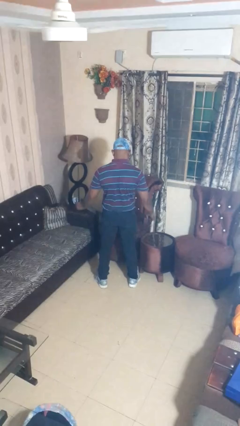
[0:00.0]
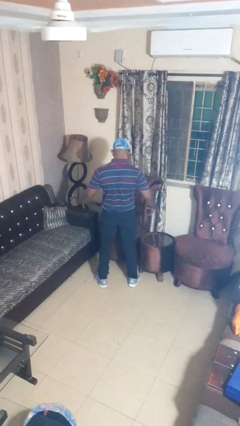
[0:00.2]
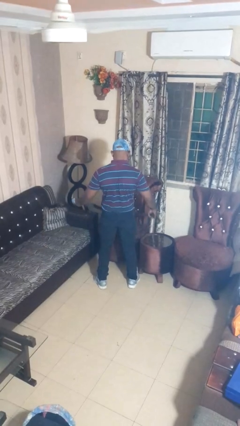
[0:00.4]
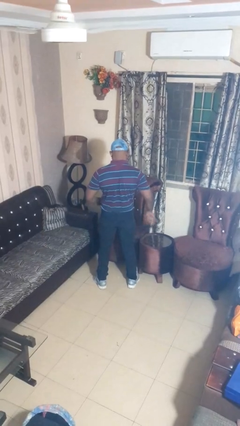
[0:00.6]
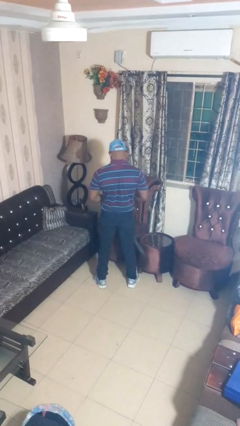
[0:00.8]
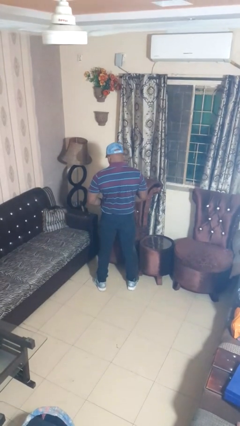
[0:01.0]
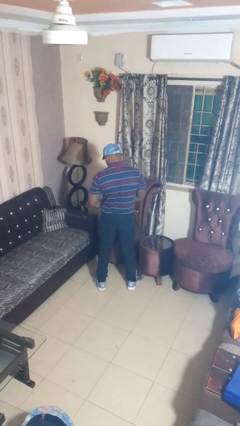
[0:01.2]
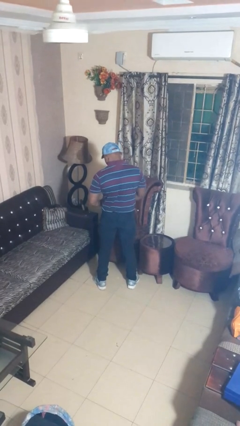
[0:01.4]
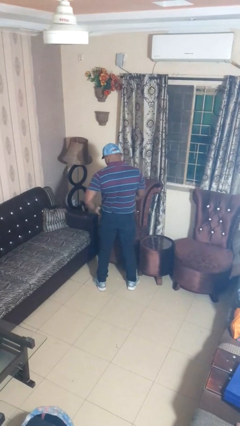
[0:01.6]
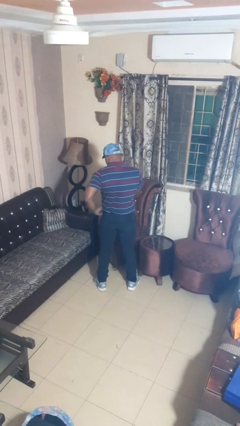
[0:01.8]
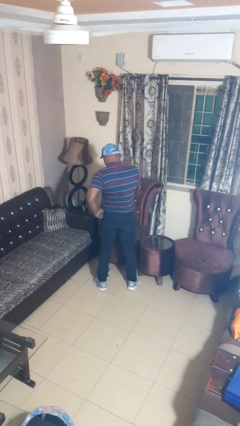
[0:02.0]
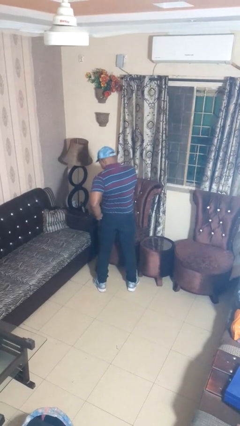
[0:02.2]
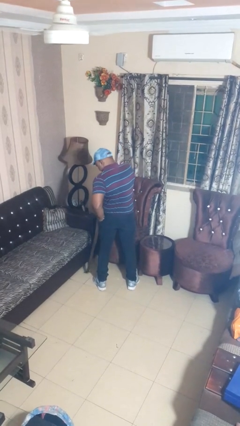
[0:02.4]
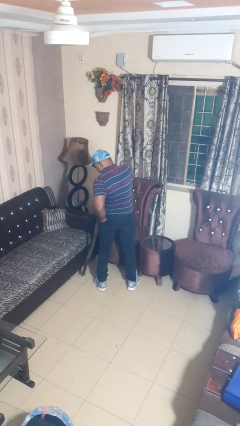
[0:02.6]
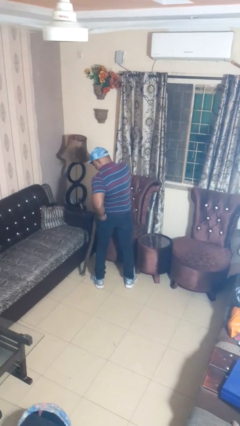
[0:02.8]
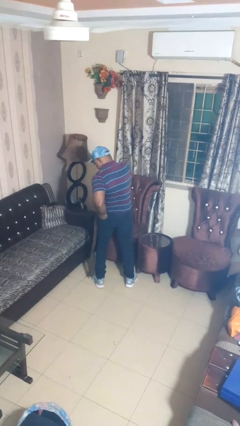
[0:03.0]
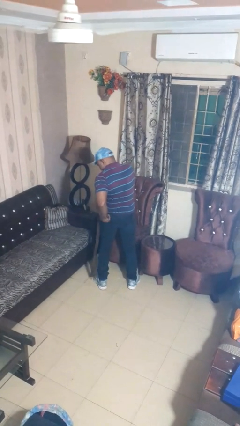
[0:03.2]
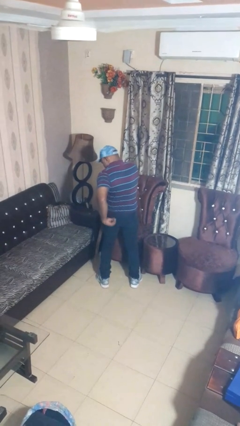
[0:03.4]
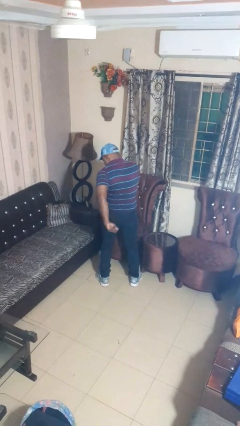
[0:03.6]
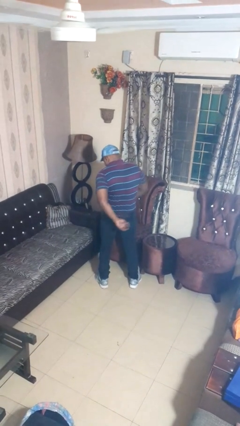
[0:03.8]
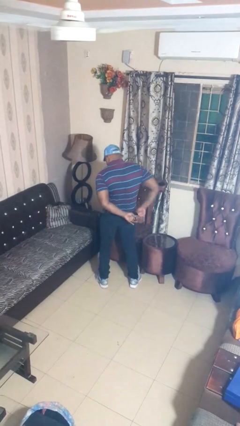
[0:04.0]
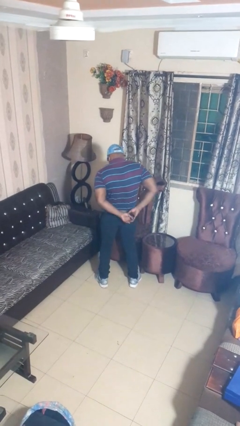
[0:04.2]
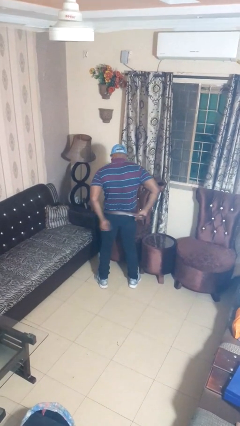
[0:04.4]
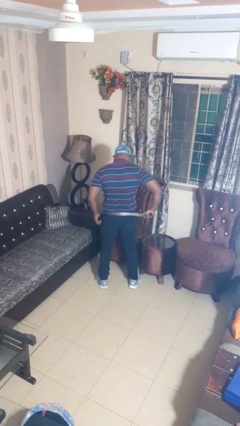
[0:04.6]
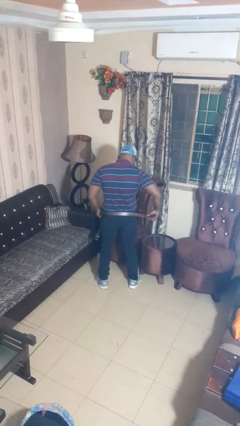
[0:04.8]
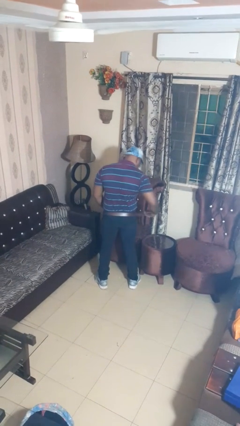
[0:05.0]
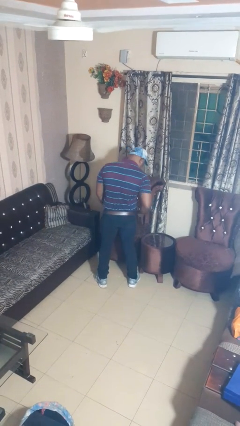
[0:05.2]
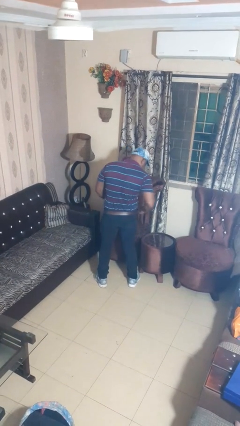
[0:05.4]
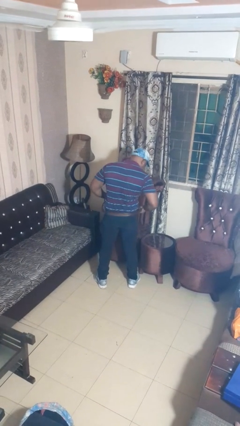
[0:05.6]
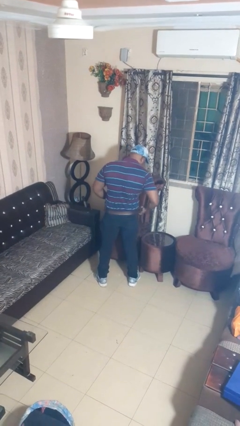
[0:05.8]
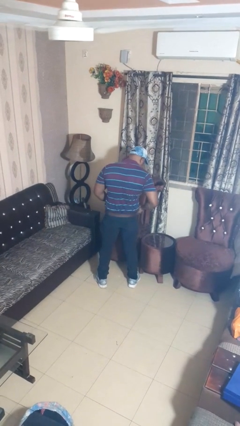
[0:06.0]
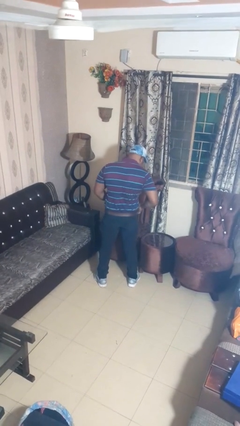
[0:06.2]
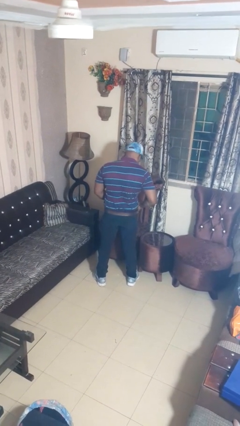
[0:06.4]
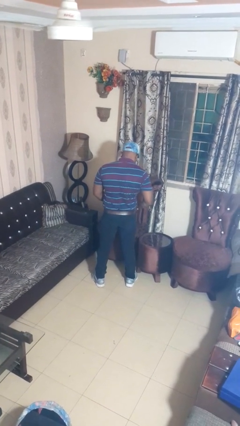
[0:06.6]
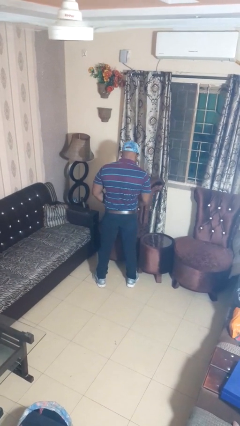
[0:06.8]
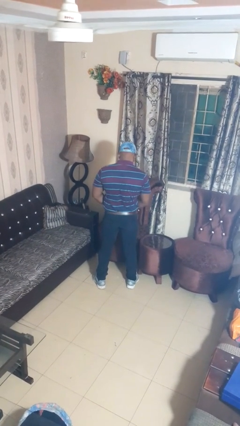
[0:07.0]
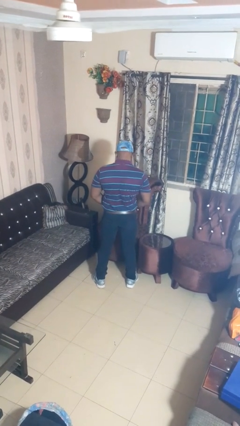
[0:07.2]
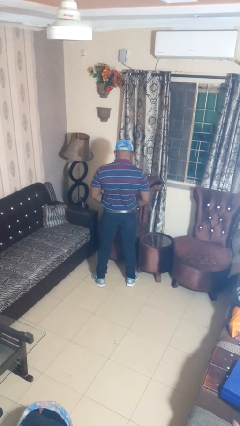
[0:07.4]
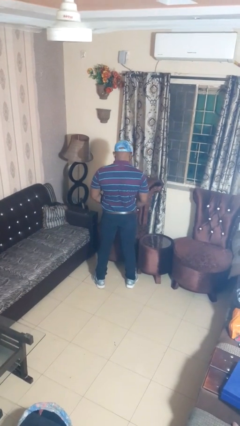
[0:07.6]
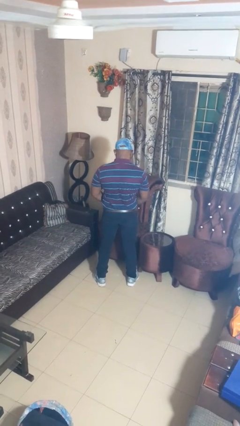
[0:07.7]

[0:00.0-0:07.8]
person puts on belt

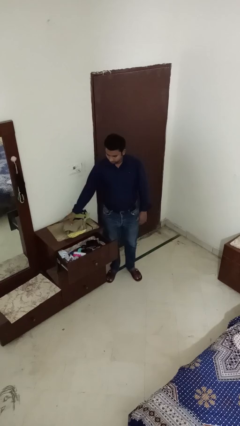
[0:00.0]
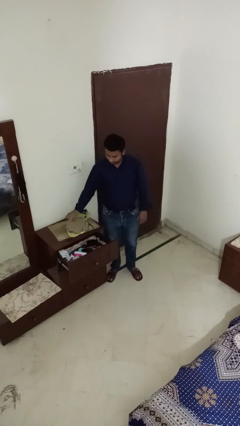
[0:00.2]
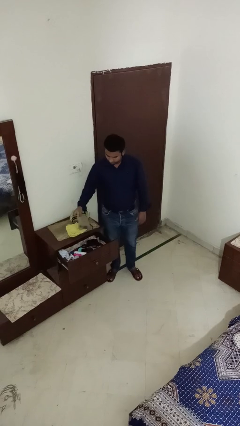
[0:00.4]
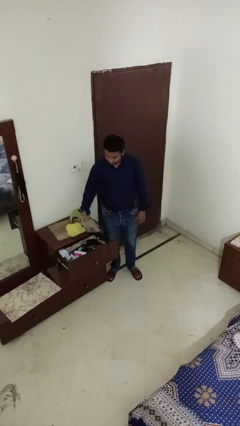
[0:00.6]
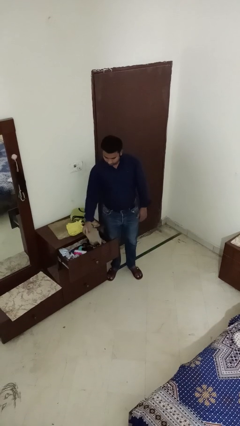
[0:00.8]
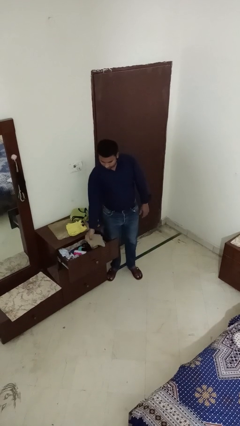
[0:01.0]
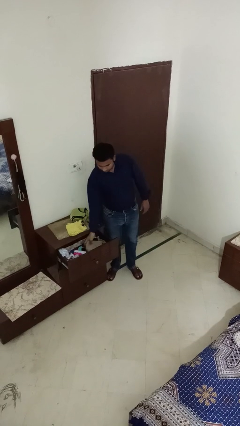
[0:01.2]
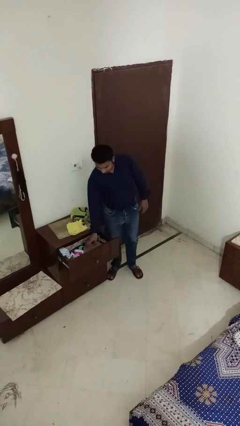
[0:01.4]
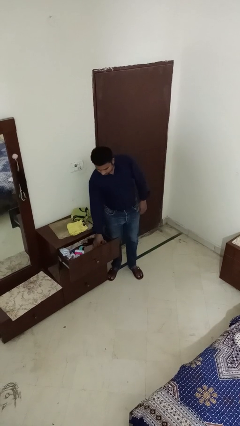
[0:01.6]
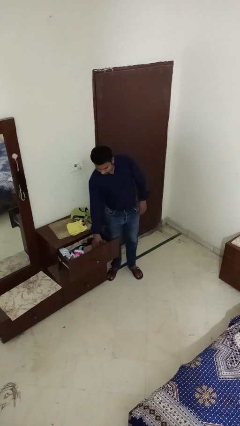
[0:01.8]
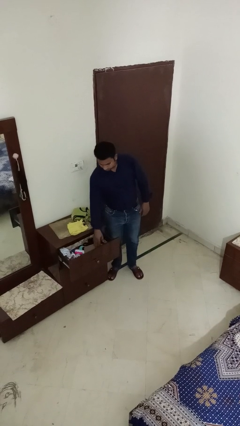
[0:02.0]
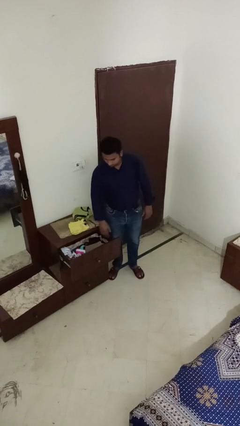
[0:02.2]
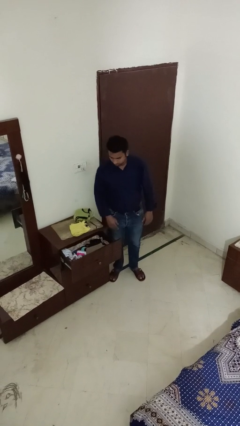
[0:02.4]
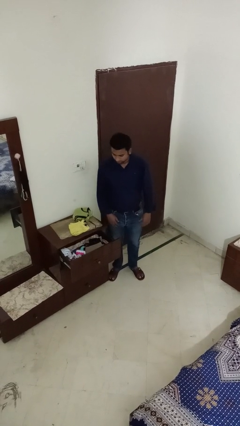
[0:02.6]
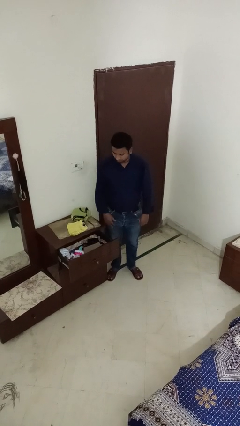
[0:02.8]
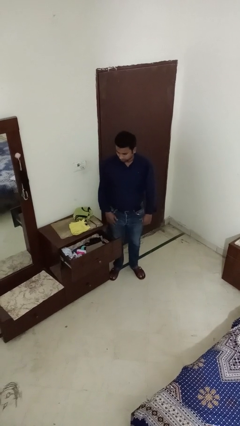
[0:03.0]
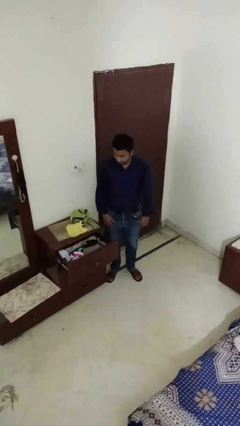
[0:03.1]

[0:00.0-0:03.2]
person puts clothes into dresser

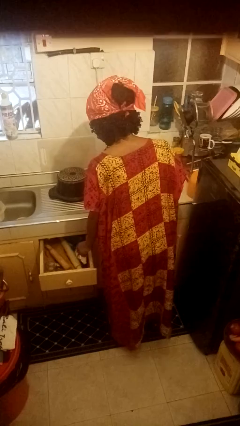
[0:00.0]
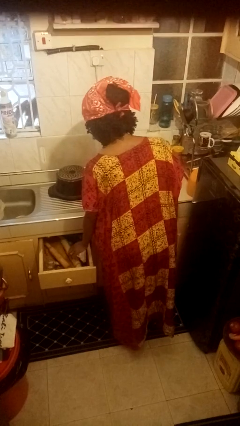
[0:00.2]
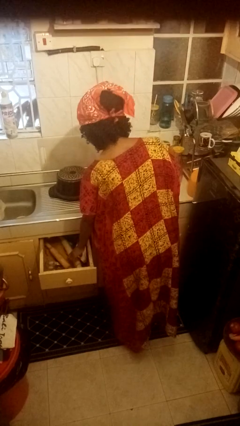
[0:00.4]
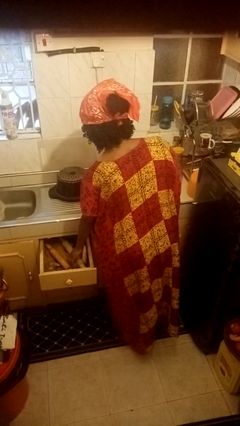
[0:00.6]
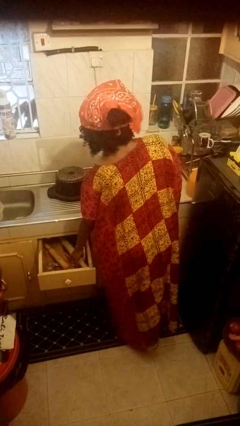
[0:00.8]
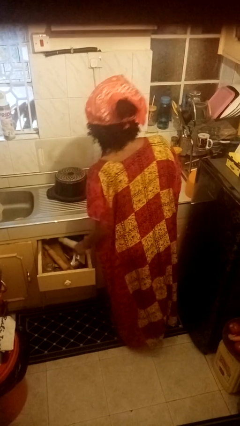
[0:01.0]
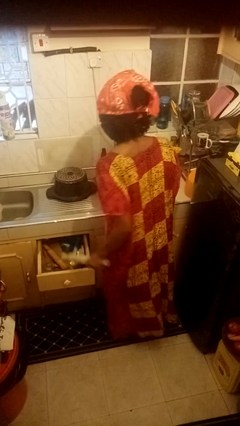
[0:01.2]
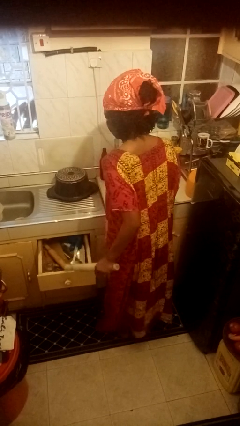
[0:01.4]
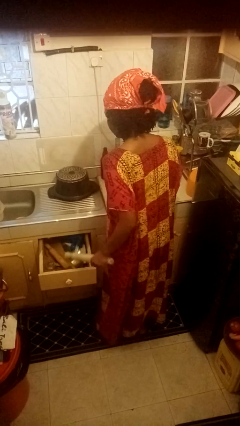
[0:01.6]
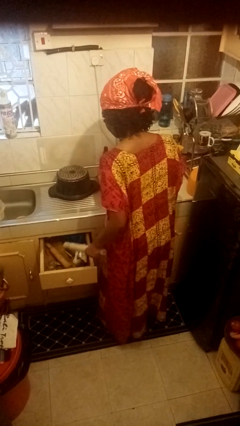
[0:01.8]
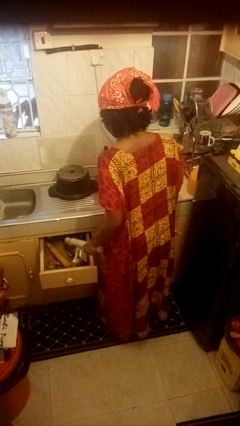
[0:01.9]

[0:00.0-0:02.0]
person takes object from kitchen drawer

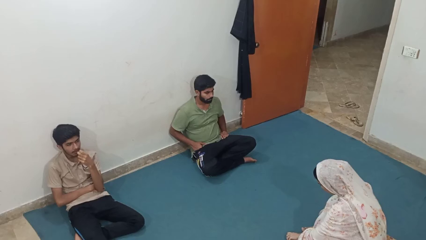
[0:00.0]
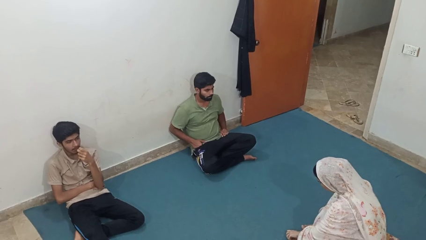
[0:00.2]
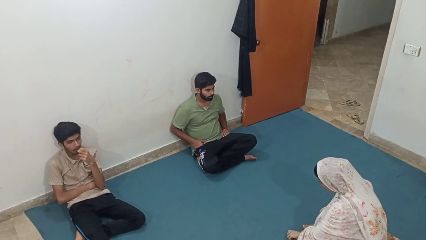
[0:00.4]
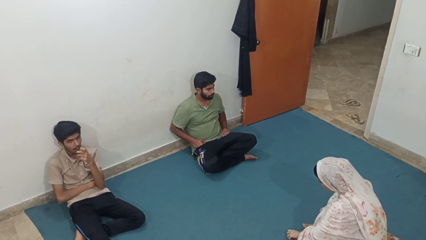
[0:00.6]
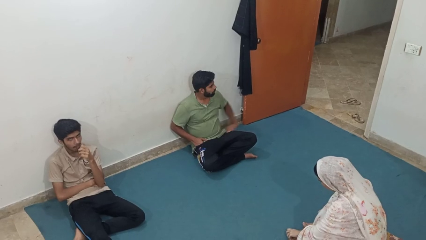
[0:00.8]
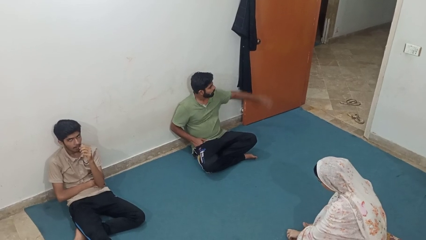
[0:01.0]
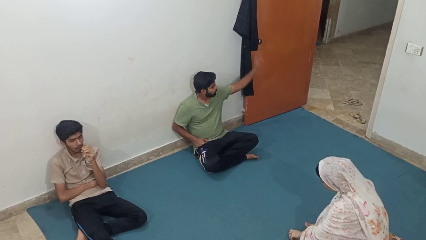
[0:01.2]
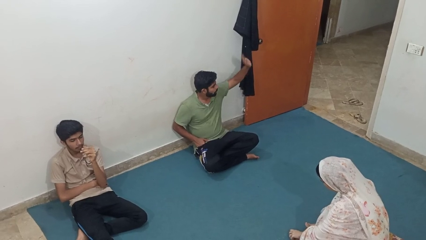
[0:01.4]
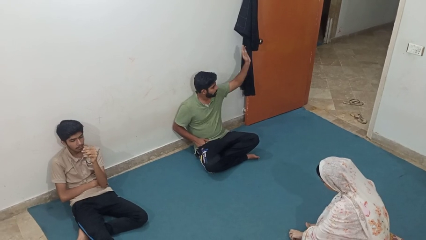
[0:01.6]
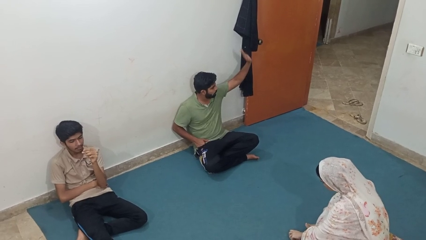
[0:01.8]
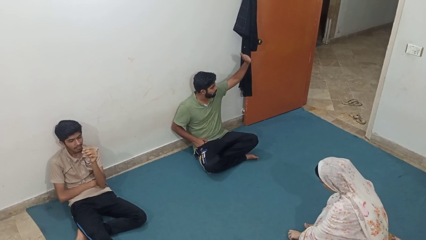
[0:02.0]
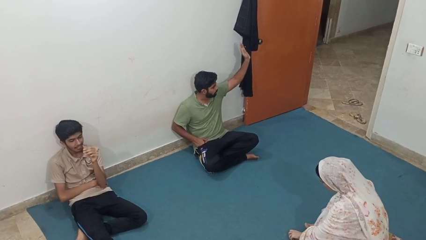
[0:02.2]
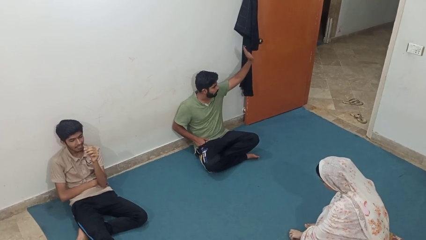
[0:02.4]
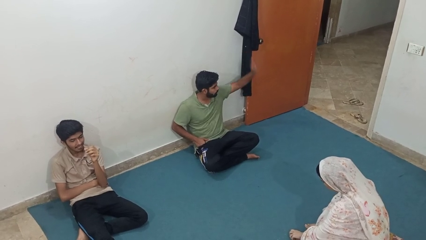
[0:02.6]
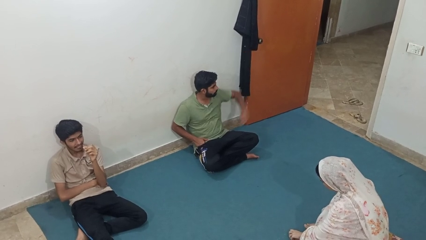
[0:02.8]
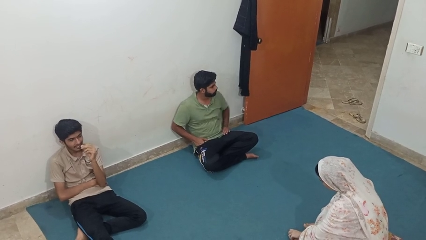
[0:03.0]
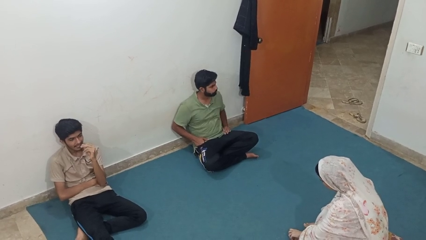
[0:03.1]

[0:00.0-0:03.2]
person waves at person

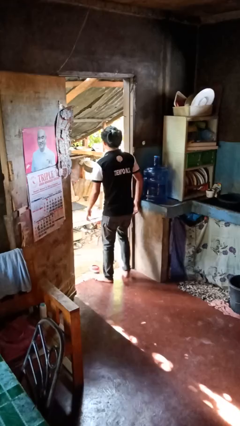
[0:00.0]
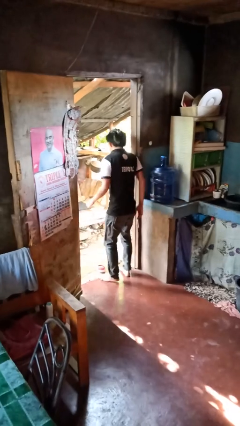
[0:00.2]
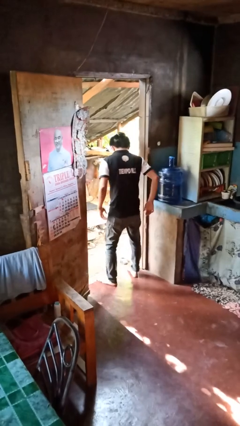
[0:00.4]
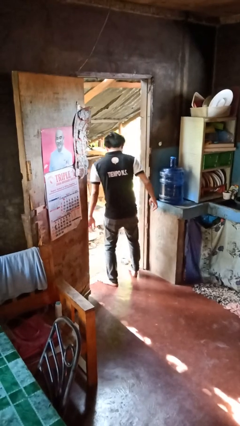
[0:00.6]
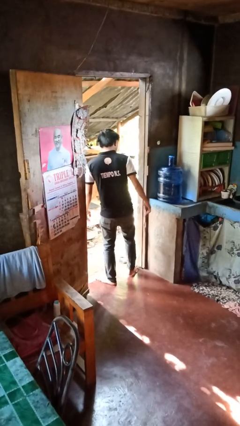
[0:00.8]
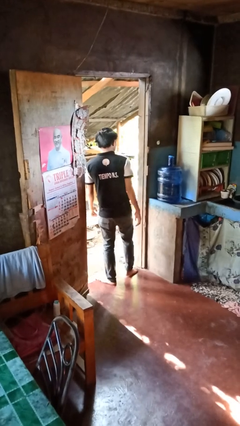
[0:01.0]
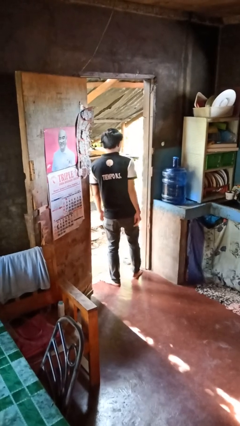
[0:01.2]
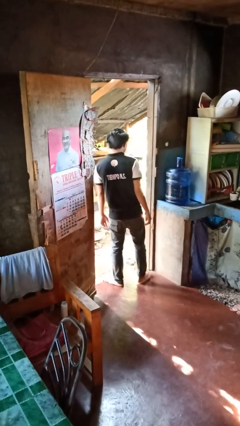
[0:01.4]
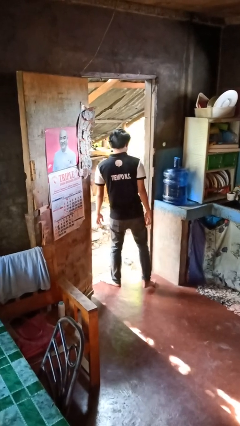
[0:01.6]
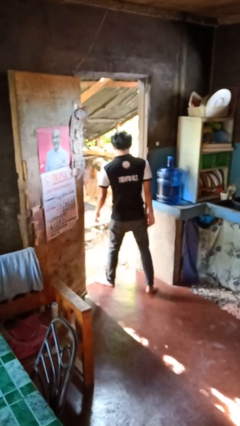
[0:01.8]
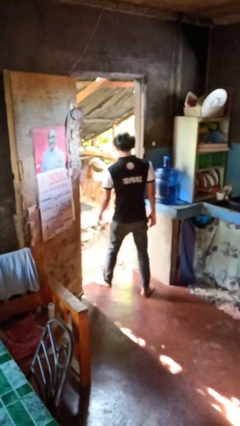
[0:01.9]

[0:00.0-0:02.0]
person bumps into wall
